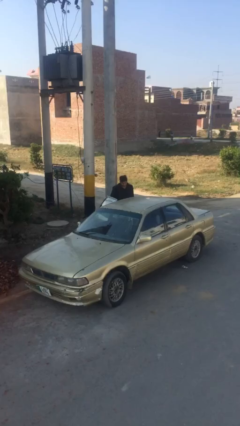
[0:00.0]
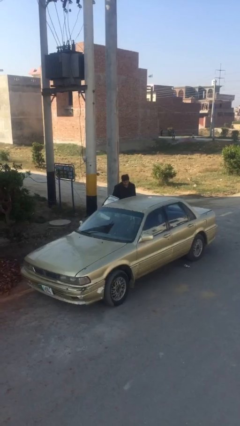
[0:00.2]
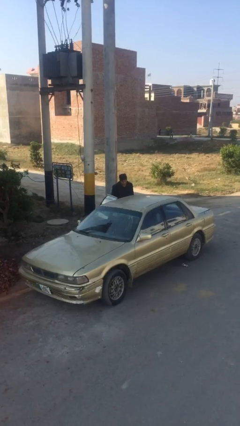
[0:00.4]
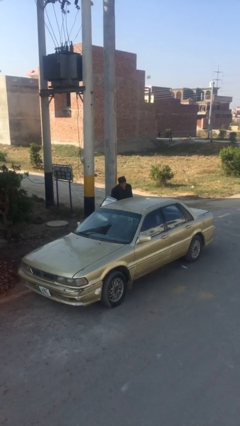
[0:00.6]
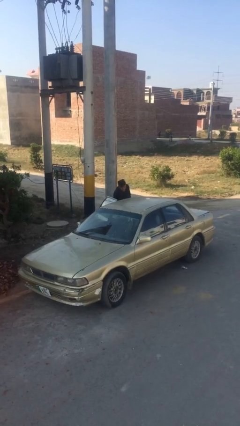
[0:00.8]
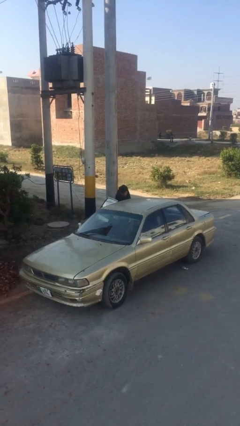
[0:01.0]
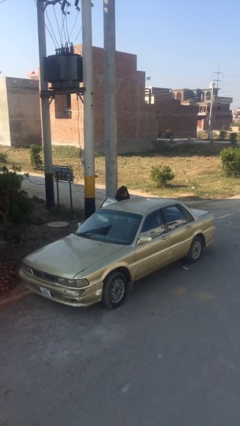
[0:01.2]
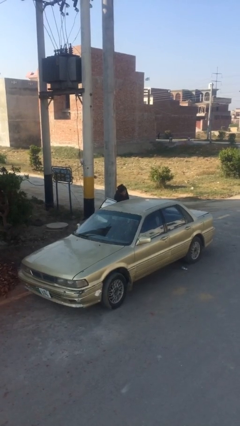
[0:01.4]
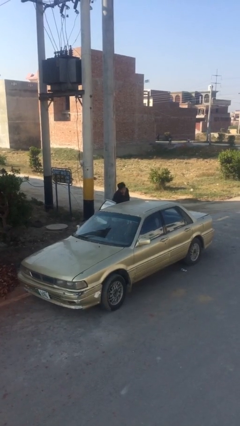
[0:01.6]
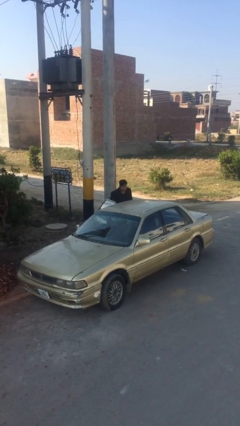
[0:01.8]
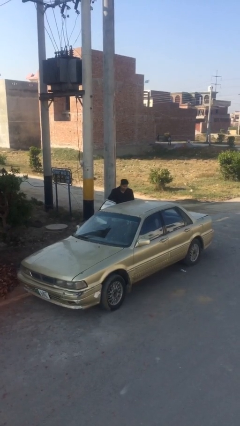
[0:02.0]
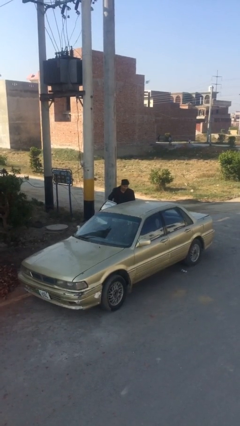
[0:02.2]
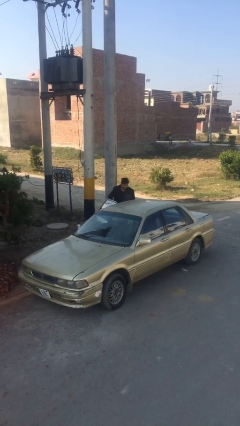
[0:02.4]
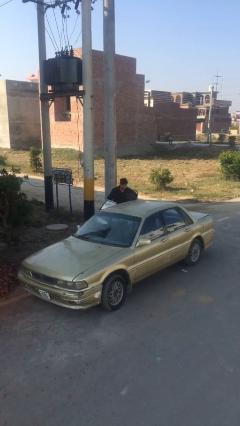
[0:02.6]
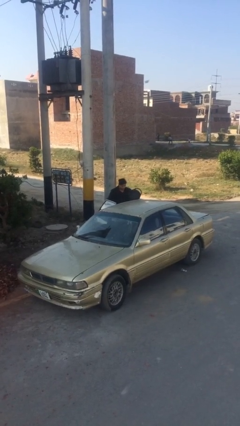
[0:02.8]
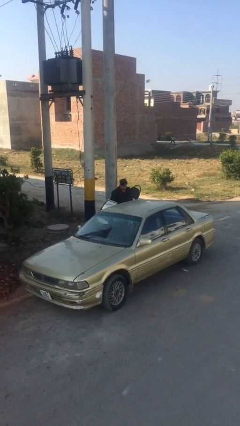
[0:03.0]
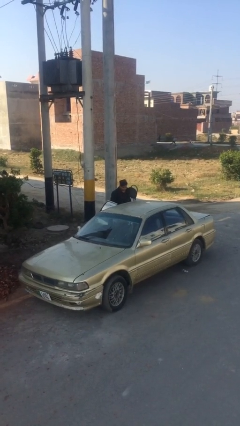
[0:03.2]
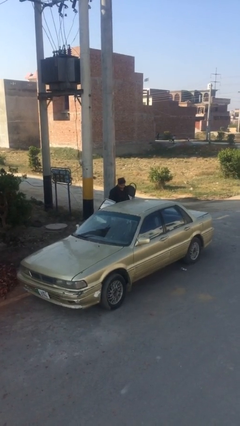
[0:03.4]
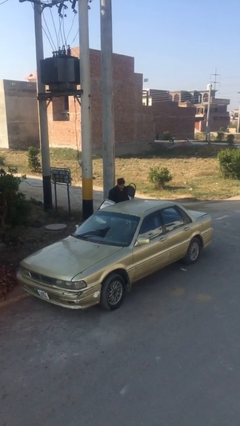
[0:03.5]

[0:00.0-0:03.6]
person unloads car

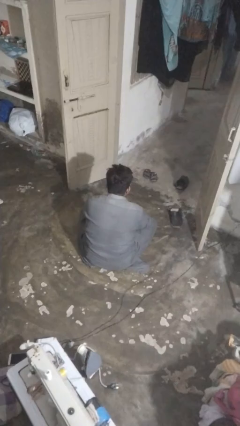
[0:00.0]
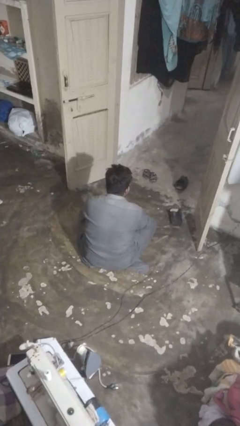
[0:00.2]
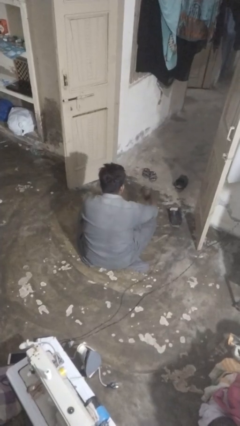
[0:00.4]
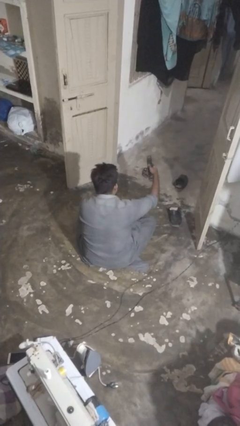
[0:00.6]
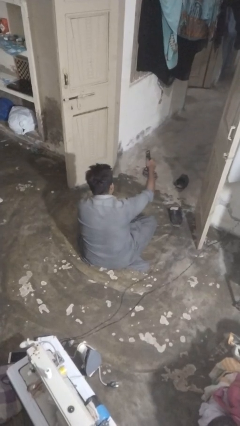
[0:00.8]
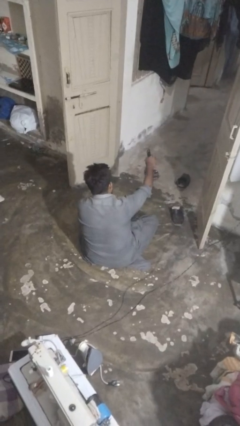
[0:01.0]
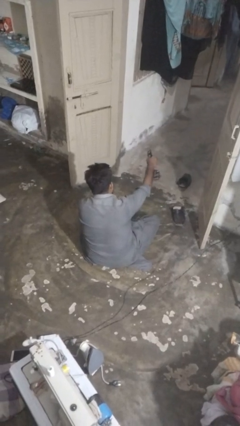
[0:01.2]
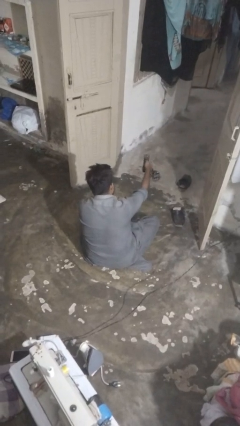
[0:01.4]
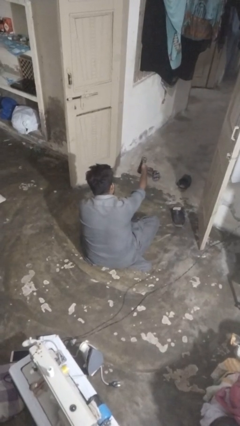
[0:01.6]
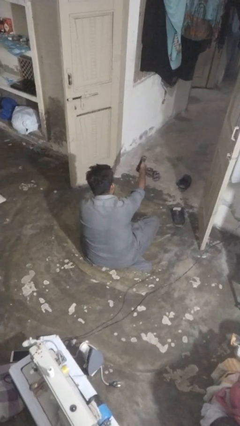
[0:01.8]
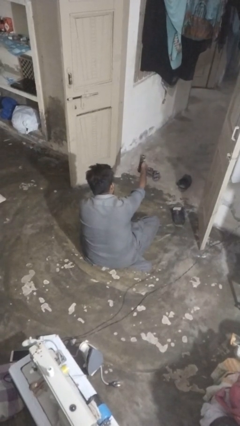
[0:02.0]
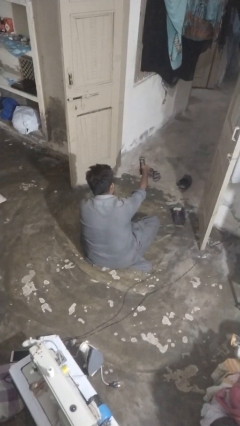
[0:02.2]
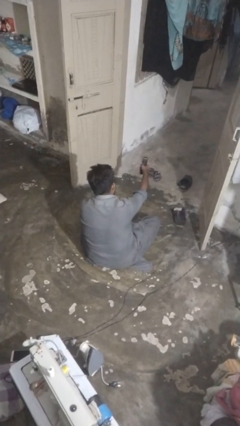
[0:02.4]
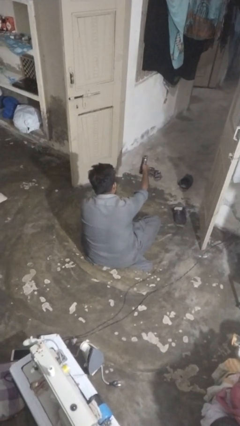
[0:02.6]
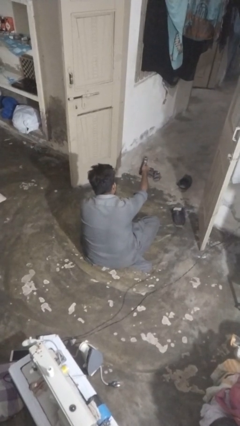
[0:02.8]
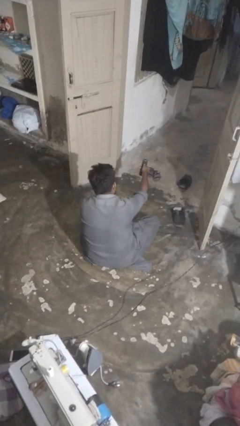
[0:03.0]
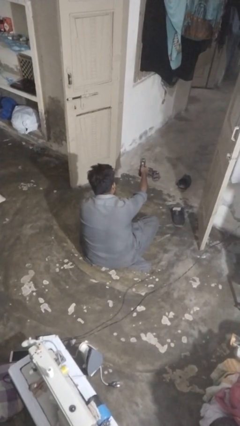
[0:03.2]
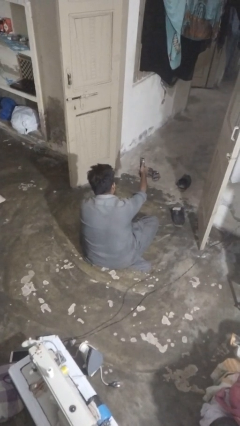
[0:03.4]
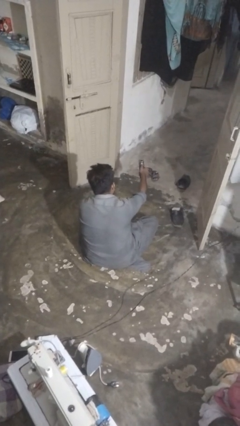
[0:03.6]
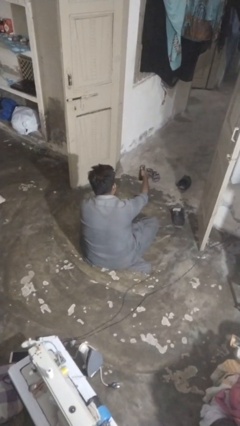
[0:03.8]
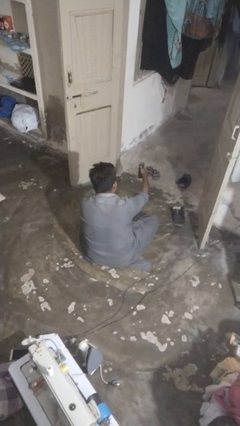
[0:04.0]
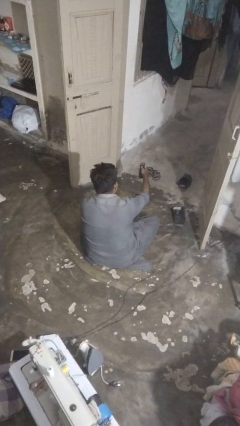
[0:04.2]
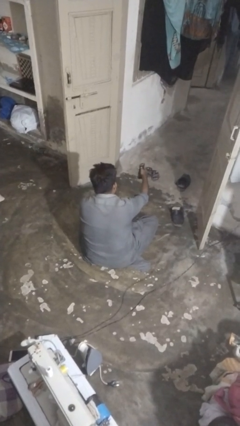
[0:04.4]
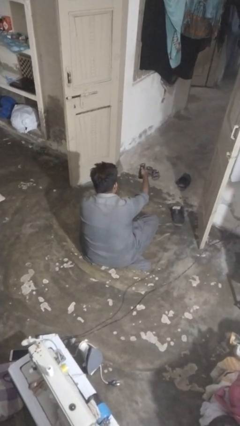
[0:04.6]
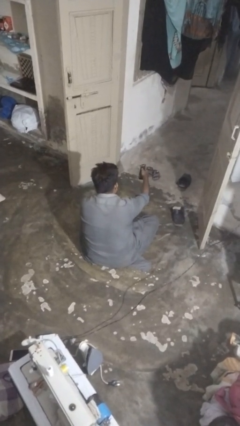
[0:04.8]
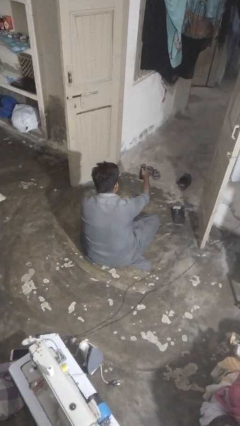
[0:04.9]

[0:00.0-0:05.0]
person uses television remote

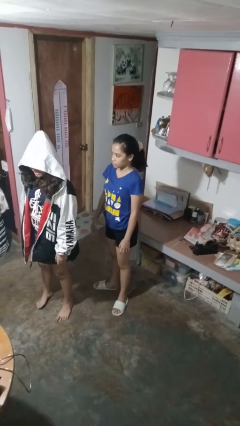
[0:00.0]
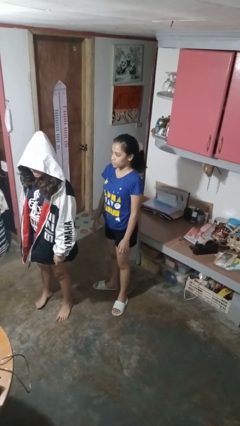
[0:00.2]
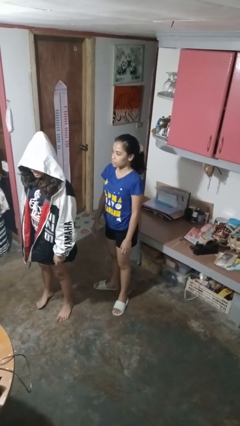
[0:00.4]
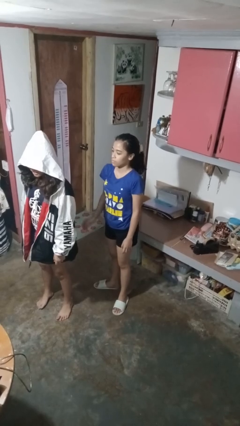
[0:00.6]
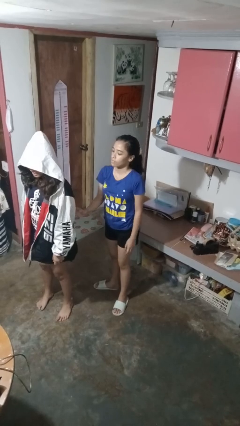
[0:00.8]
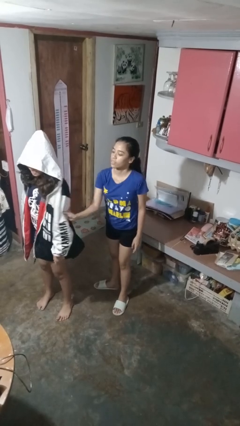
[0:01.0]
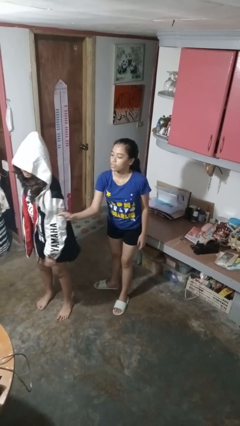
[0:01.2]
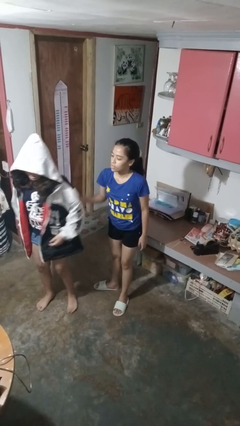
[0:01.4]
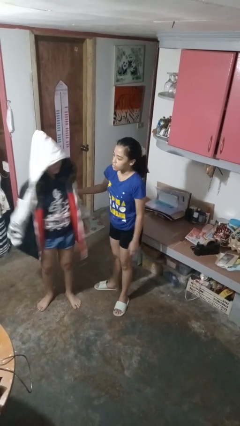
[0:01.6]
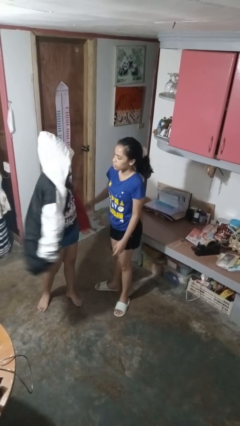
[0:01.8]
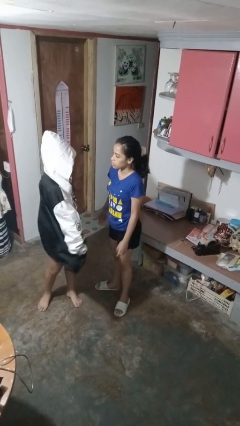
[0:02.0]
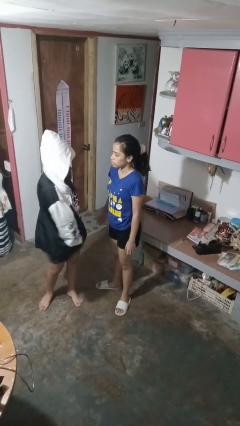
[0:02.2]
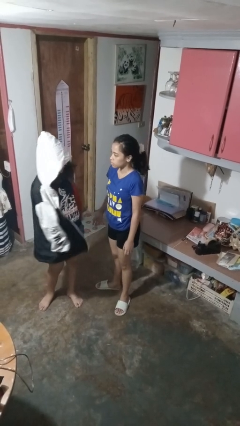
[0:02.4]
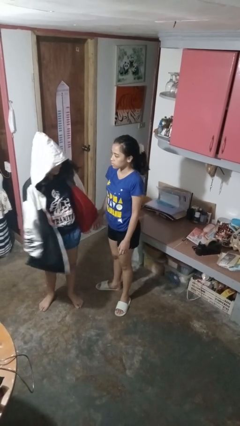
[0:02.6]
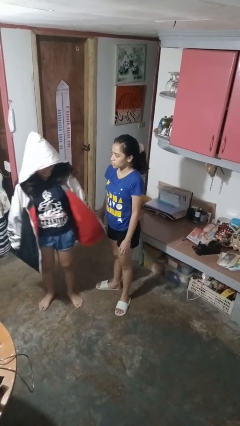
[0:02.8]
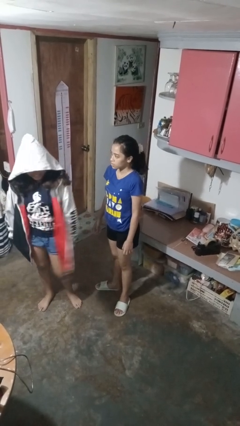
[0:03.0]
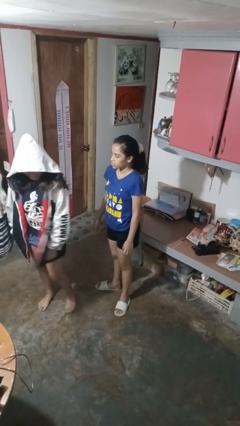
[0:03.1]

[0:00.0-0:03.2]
person grabs person by bicep

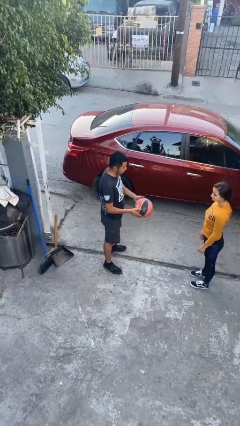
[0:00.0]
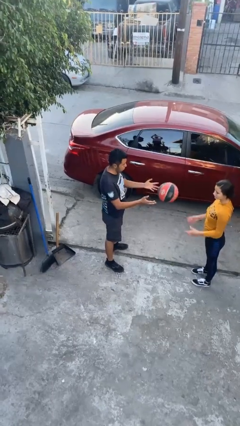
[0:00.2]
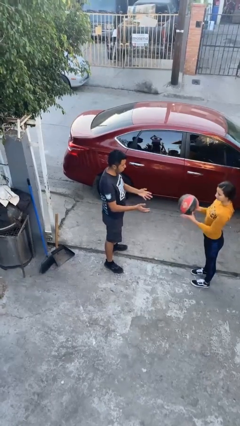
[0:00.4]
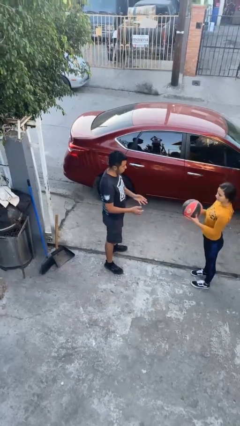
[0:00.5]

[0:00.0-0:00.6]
person throws object to person

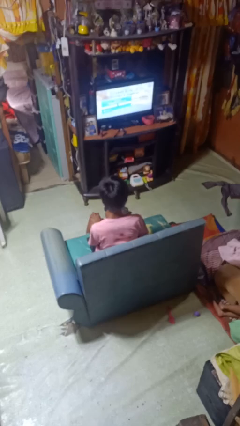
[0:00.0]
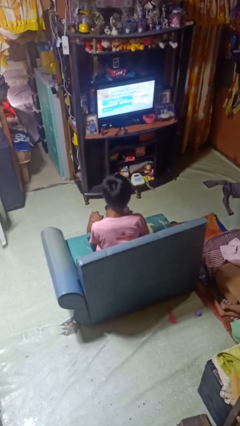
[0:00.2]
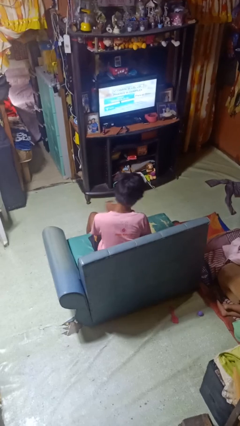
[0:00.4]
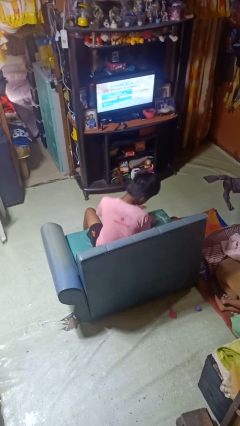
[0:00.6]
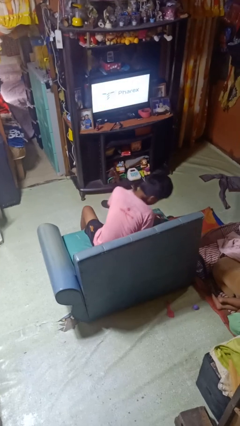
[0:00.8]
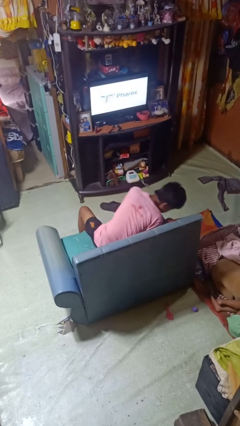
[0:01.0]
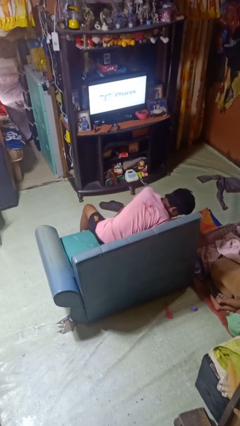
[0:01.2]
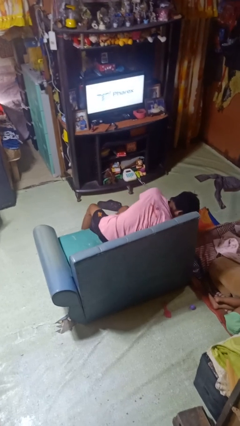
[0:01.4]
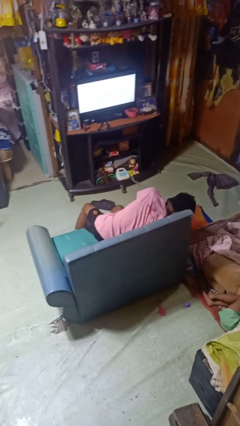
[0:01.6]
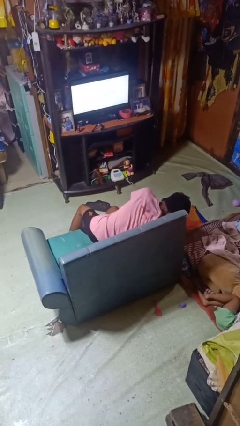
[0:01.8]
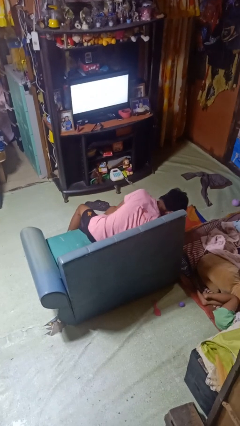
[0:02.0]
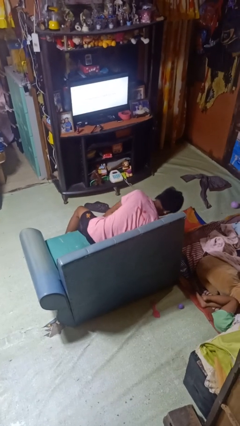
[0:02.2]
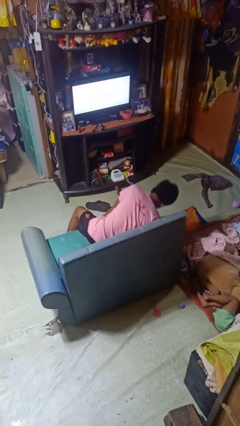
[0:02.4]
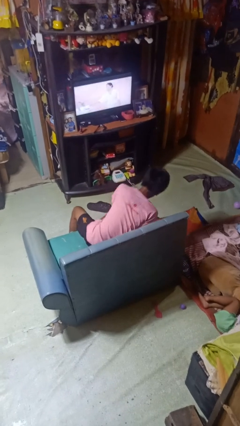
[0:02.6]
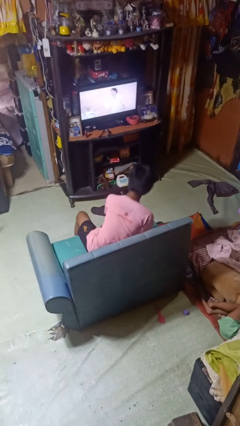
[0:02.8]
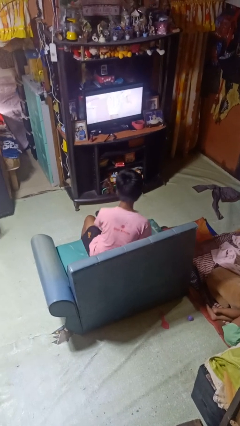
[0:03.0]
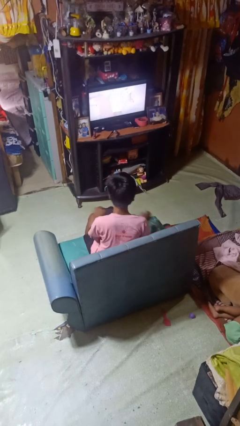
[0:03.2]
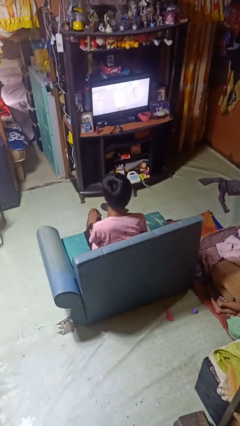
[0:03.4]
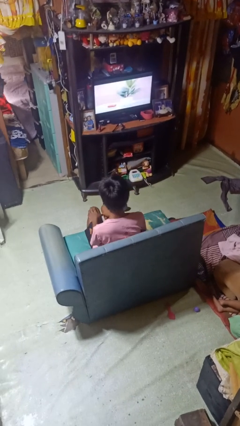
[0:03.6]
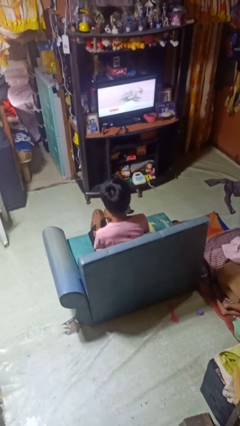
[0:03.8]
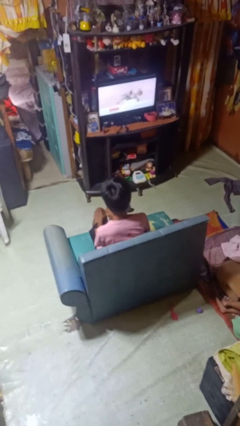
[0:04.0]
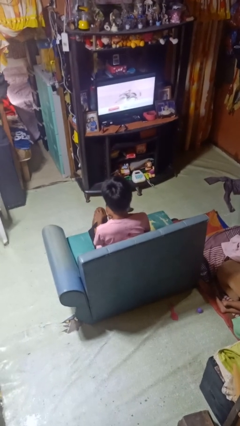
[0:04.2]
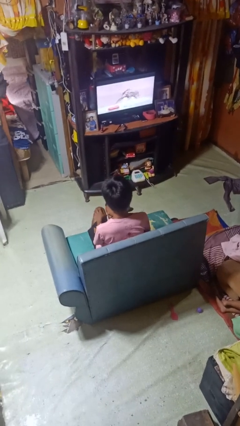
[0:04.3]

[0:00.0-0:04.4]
person searches in couch

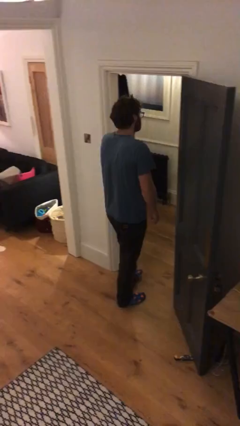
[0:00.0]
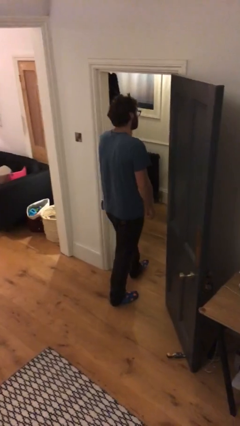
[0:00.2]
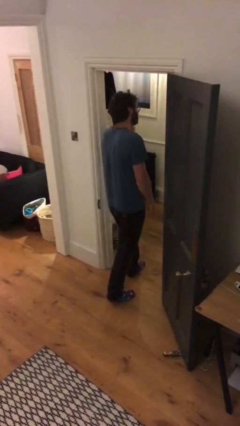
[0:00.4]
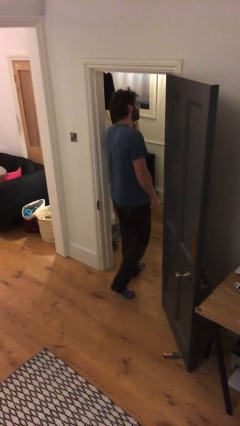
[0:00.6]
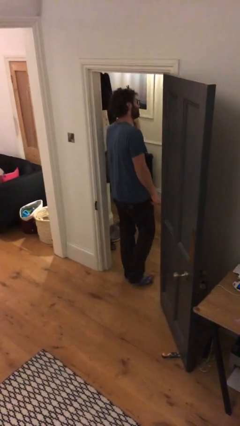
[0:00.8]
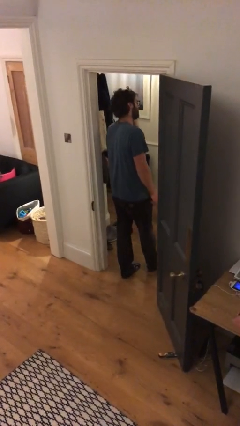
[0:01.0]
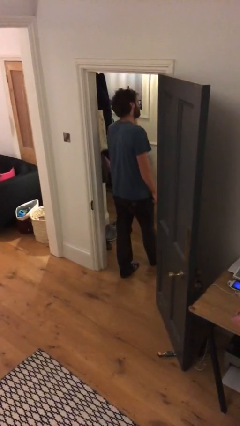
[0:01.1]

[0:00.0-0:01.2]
person exits scene through structure
